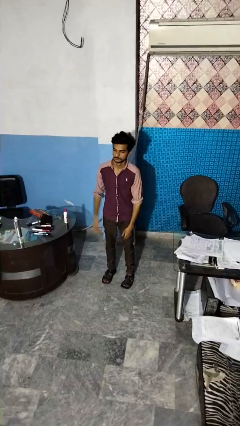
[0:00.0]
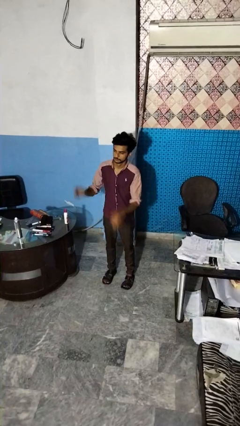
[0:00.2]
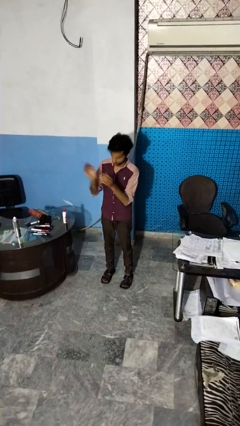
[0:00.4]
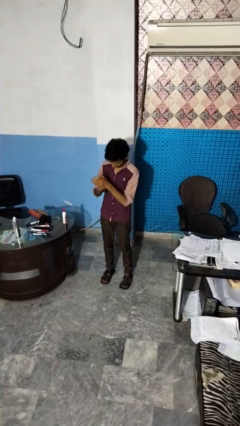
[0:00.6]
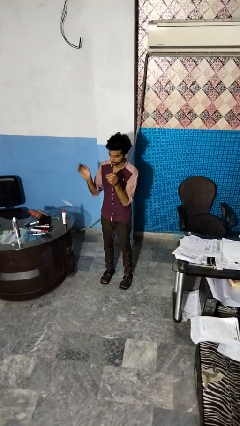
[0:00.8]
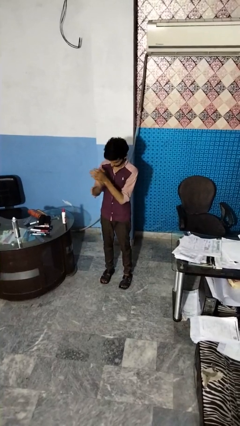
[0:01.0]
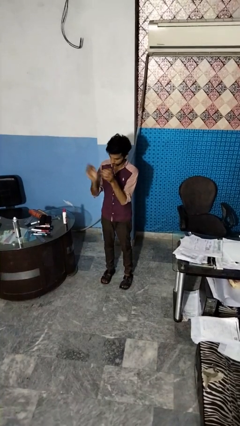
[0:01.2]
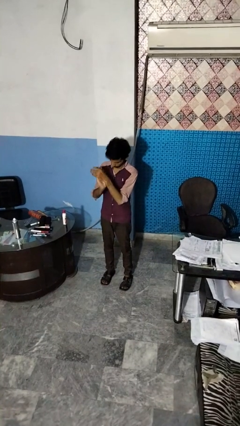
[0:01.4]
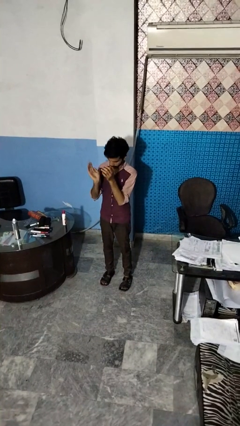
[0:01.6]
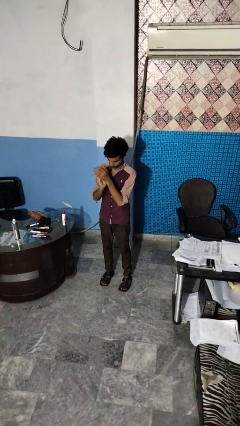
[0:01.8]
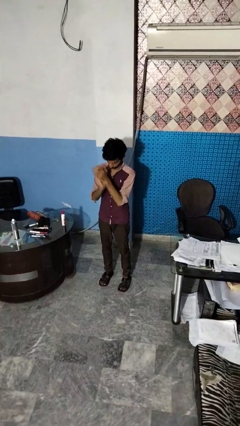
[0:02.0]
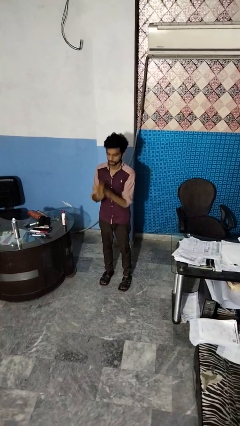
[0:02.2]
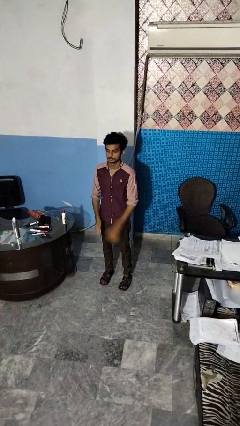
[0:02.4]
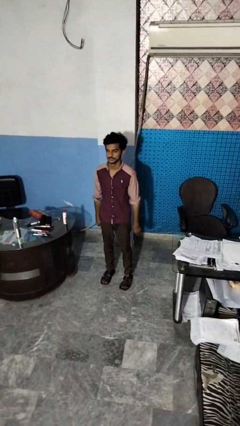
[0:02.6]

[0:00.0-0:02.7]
person claps hands

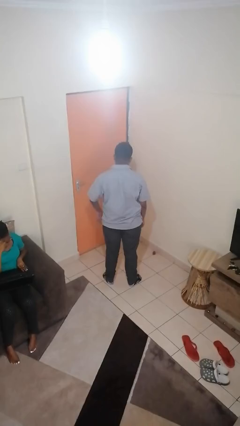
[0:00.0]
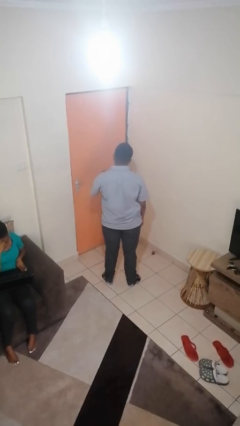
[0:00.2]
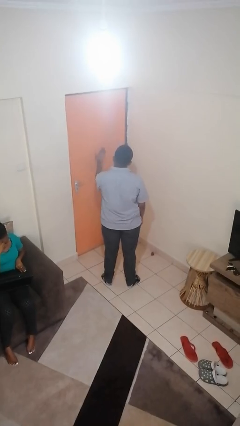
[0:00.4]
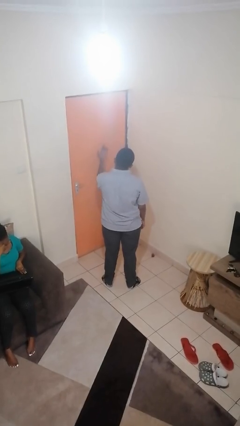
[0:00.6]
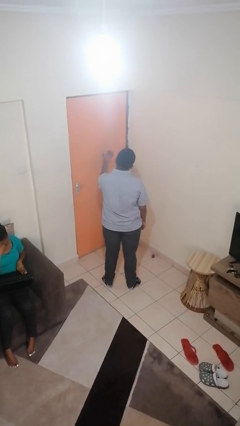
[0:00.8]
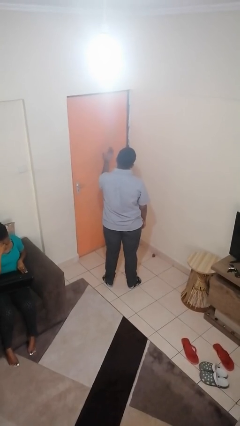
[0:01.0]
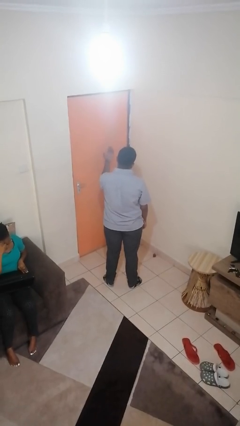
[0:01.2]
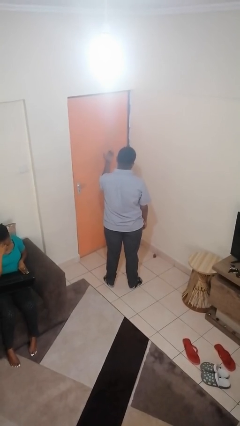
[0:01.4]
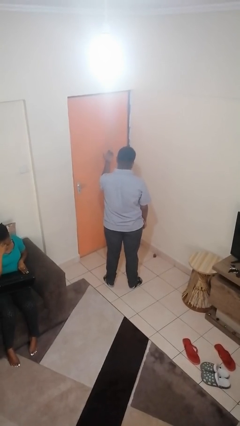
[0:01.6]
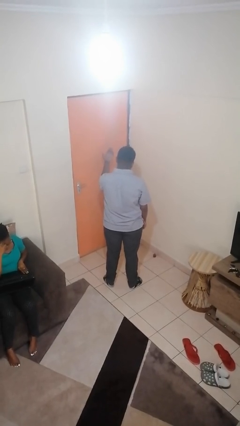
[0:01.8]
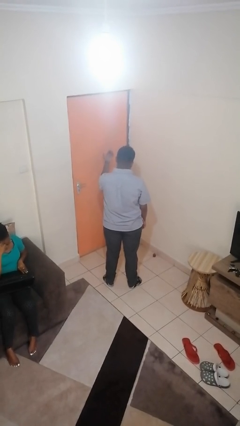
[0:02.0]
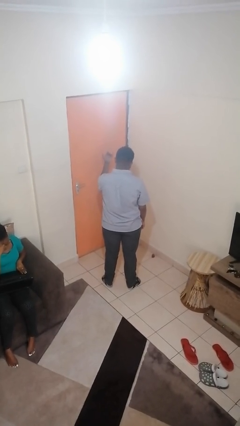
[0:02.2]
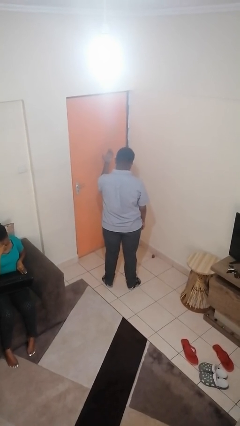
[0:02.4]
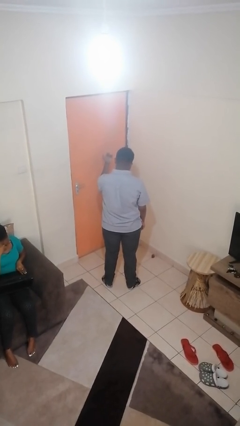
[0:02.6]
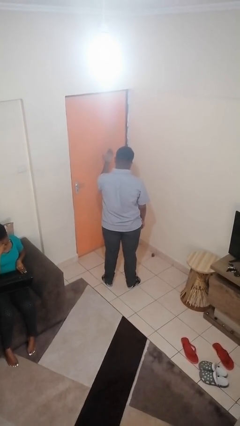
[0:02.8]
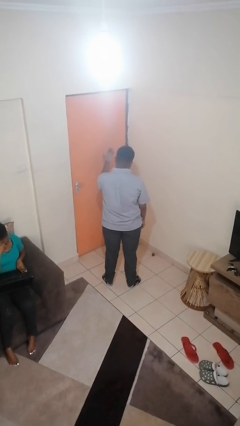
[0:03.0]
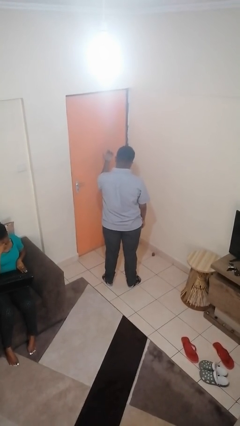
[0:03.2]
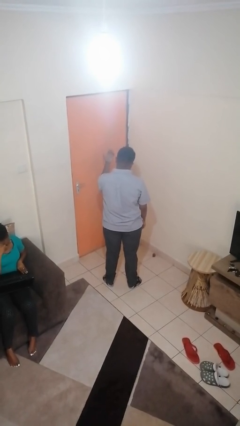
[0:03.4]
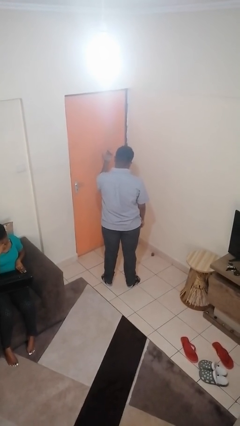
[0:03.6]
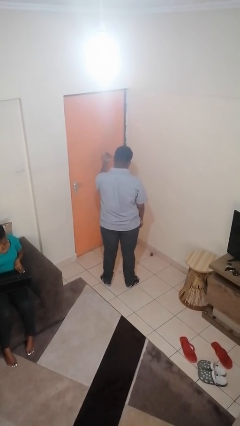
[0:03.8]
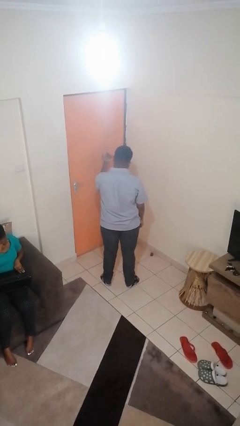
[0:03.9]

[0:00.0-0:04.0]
person gestures come here

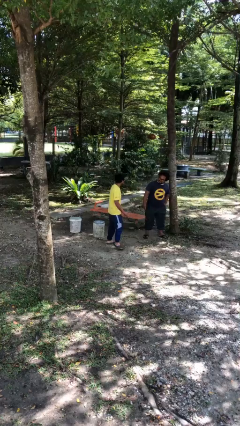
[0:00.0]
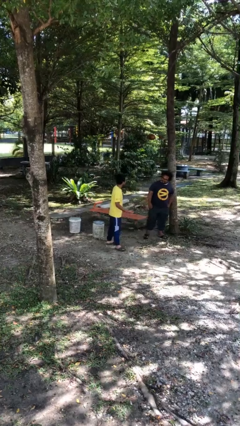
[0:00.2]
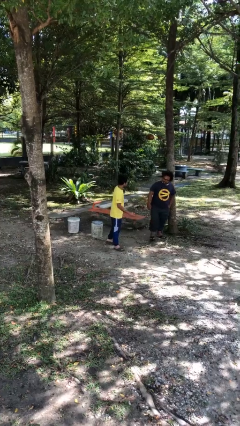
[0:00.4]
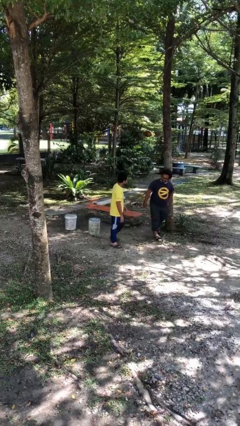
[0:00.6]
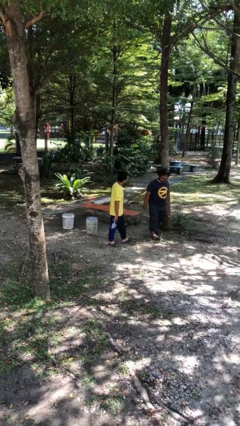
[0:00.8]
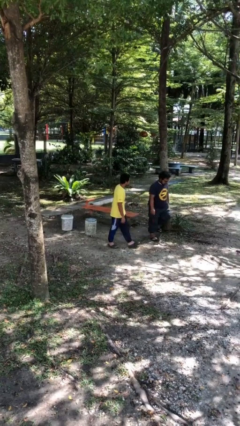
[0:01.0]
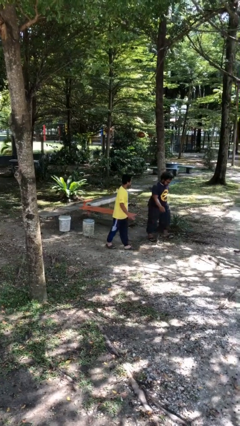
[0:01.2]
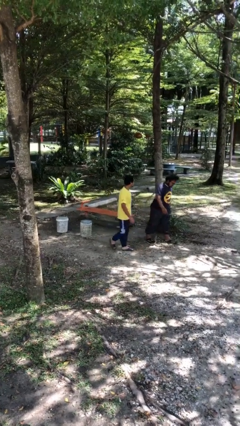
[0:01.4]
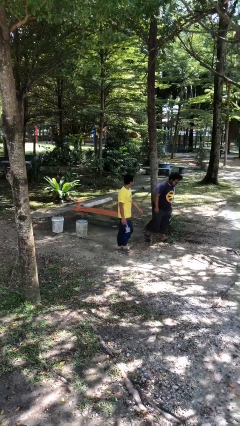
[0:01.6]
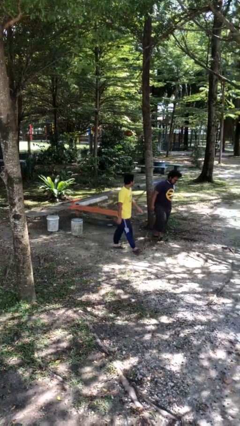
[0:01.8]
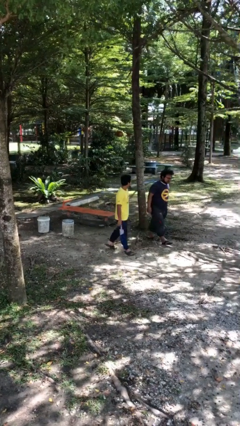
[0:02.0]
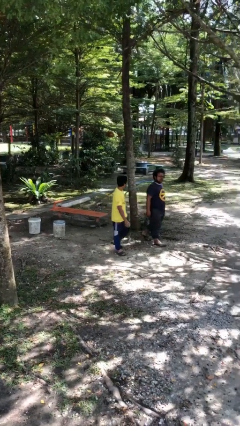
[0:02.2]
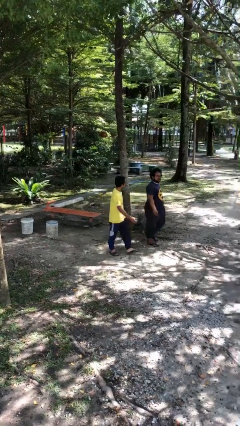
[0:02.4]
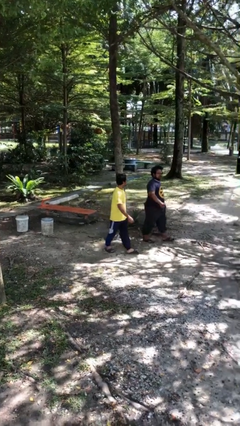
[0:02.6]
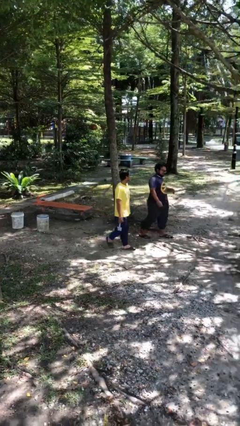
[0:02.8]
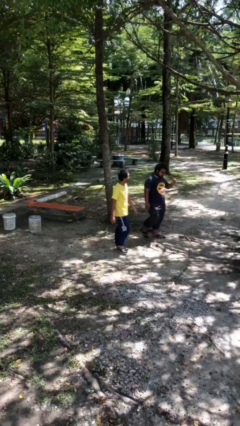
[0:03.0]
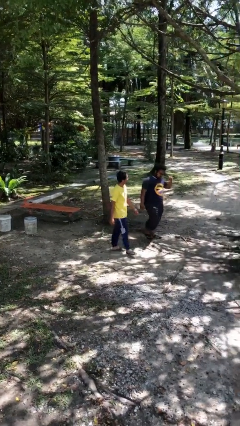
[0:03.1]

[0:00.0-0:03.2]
person talks to person

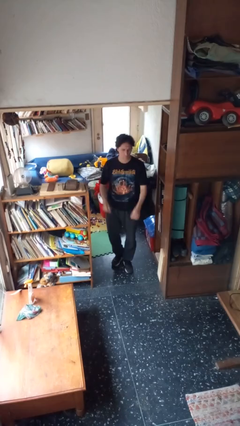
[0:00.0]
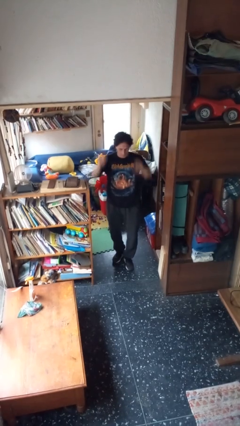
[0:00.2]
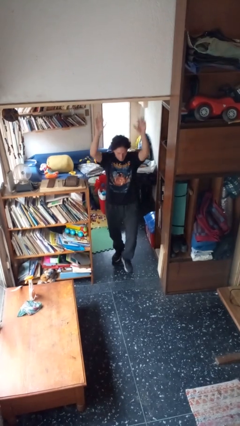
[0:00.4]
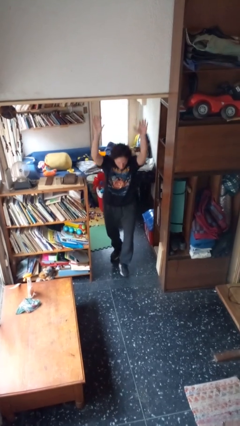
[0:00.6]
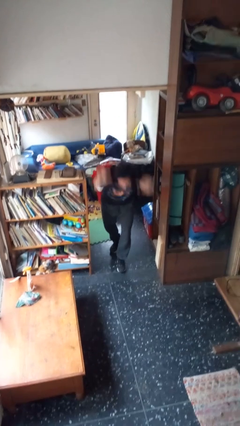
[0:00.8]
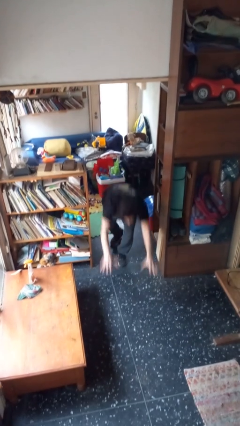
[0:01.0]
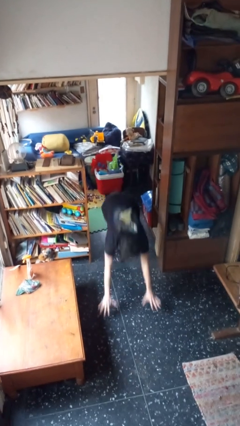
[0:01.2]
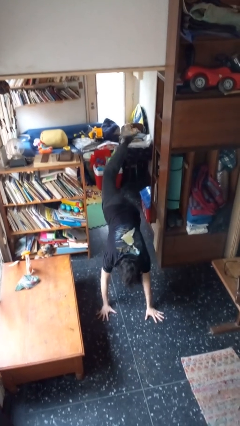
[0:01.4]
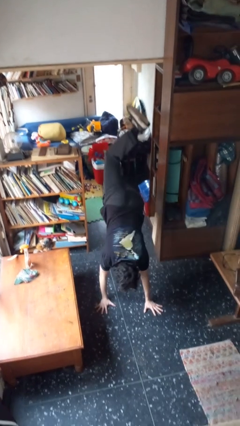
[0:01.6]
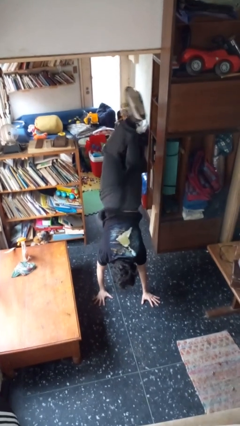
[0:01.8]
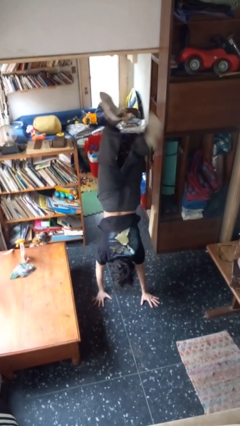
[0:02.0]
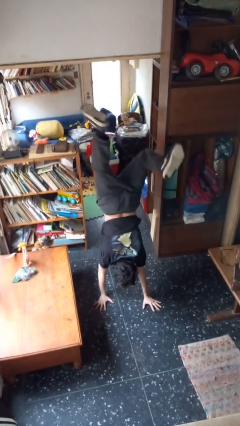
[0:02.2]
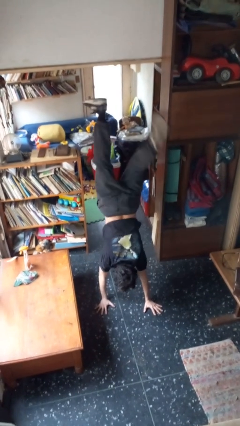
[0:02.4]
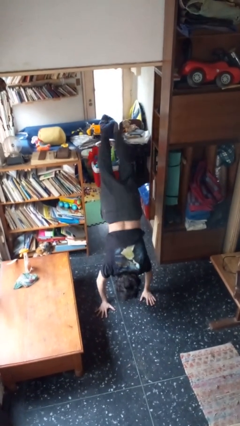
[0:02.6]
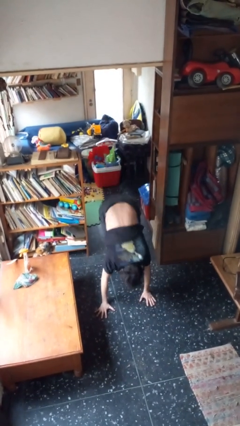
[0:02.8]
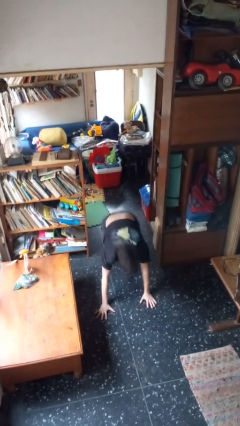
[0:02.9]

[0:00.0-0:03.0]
person handstand

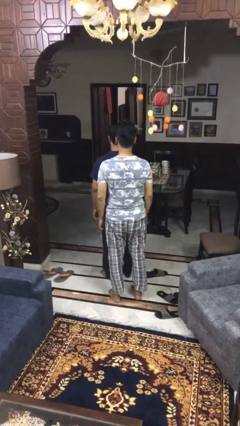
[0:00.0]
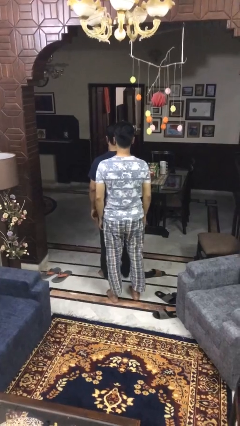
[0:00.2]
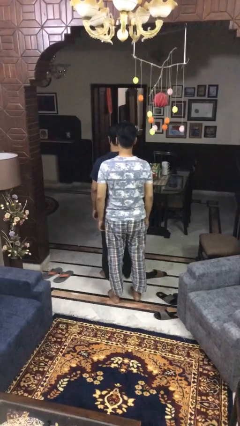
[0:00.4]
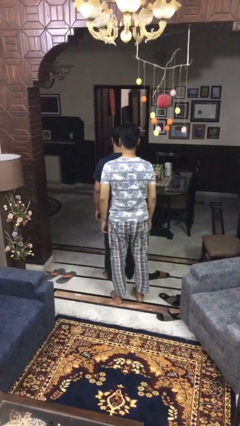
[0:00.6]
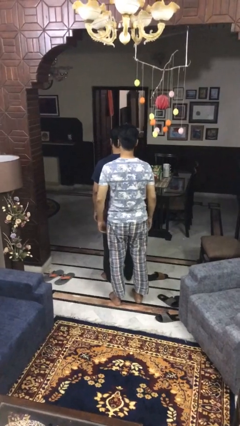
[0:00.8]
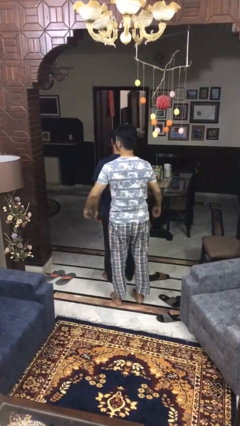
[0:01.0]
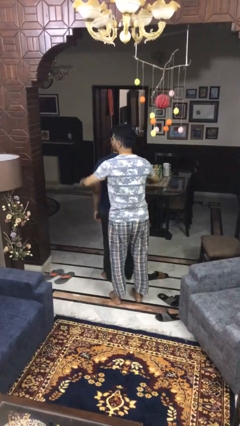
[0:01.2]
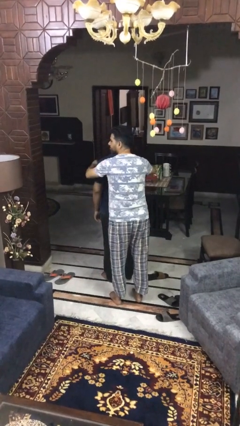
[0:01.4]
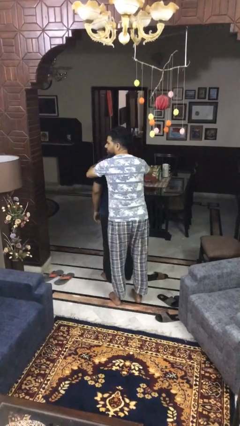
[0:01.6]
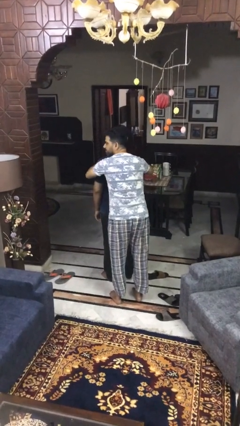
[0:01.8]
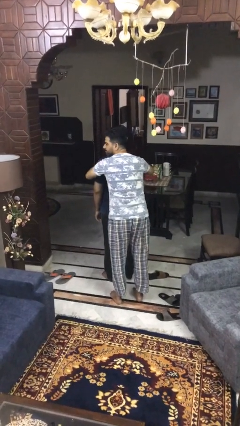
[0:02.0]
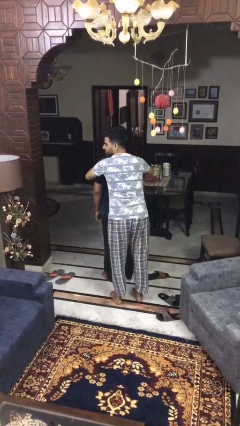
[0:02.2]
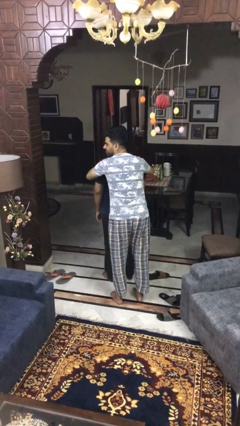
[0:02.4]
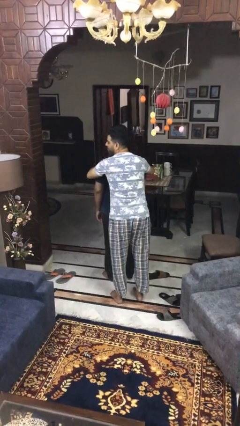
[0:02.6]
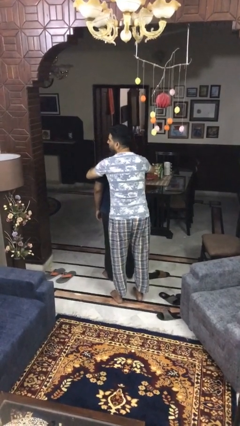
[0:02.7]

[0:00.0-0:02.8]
person hugs person from behind

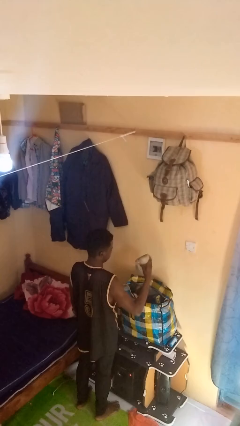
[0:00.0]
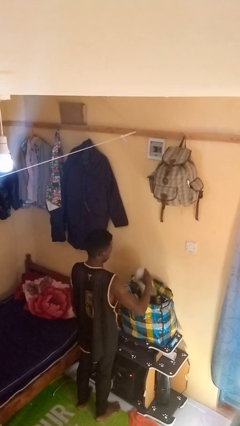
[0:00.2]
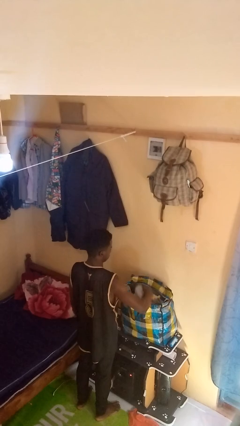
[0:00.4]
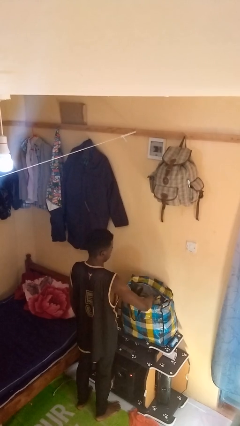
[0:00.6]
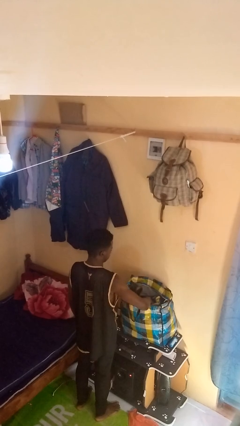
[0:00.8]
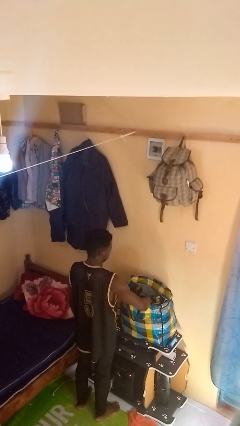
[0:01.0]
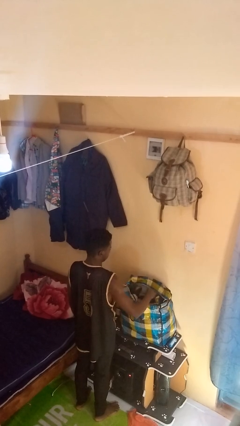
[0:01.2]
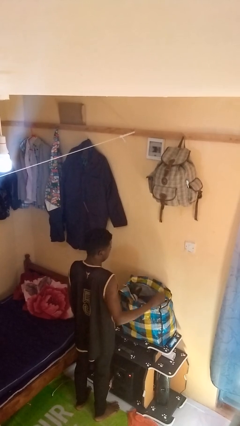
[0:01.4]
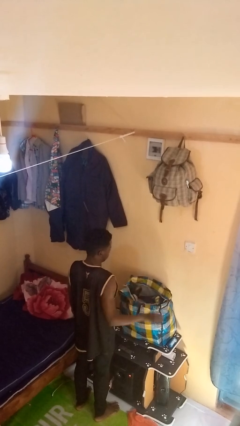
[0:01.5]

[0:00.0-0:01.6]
person puts object into bag
